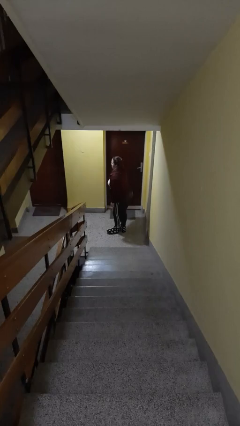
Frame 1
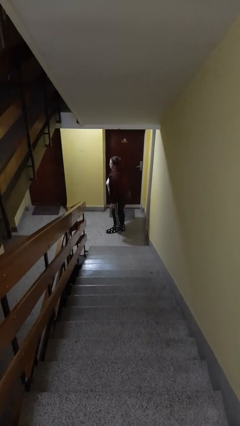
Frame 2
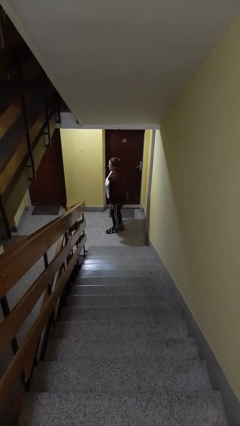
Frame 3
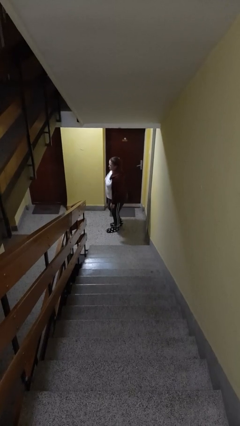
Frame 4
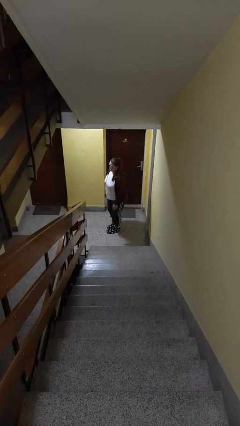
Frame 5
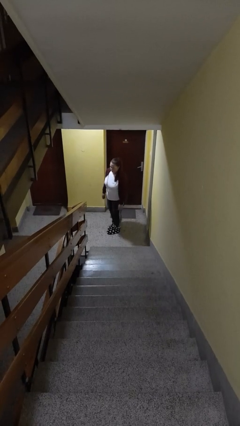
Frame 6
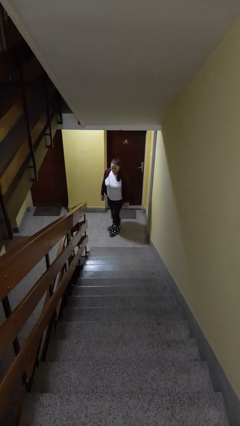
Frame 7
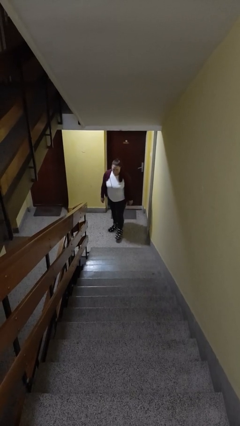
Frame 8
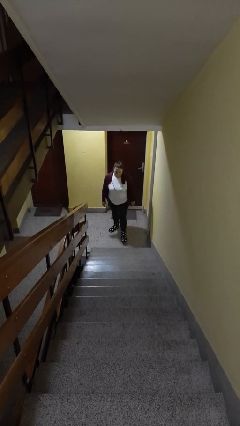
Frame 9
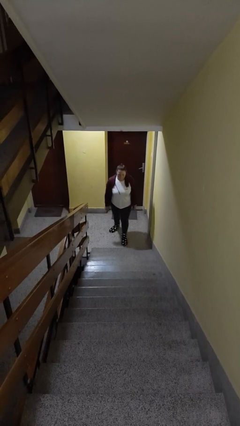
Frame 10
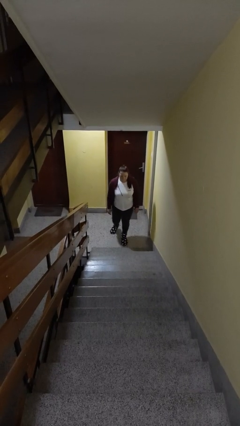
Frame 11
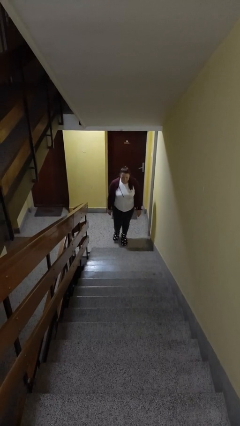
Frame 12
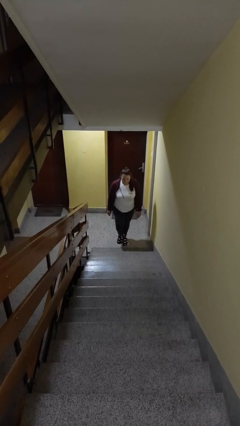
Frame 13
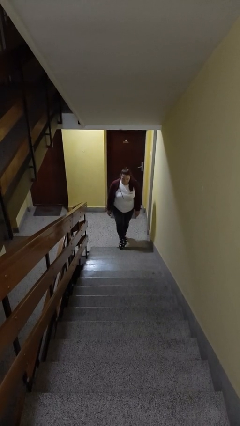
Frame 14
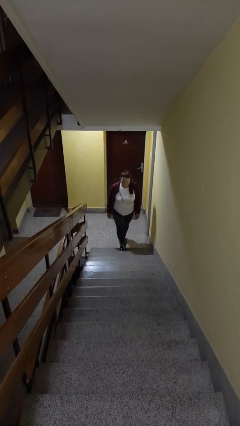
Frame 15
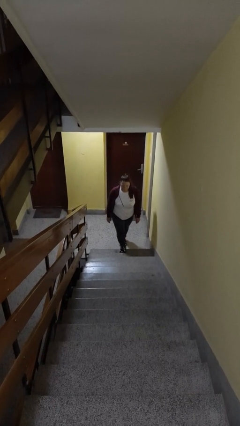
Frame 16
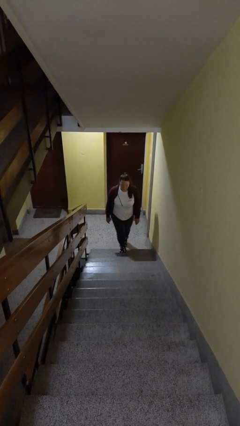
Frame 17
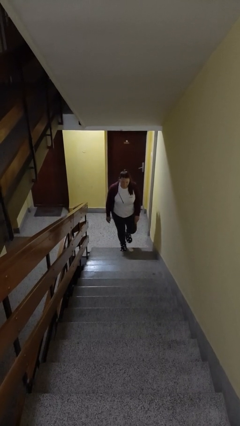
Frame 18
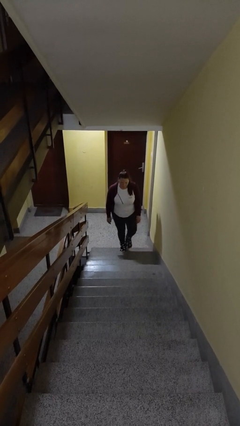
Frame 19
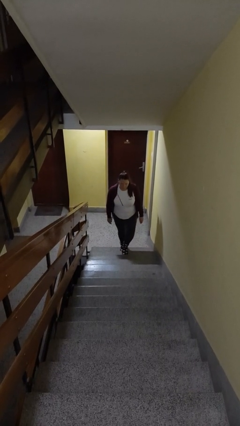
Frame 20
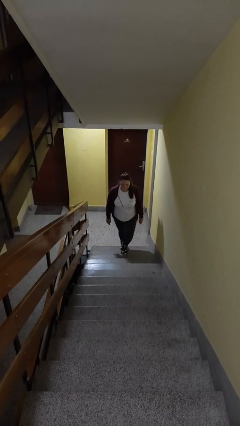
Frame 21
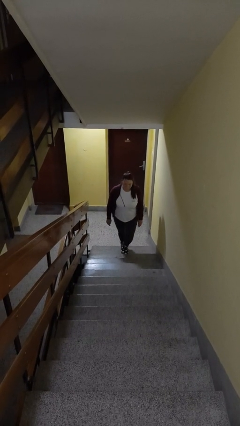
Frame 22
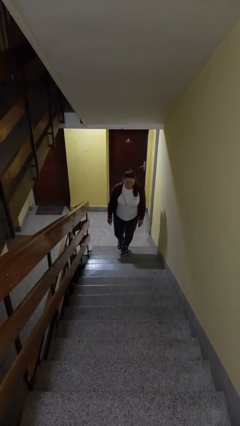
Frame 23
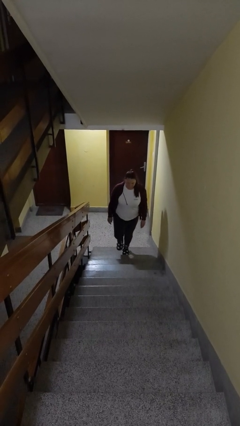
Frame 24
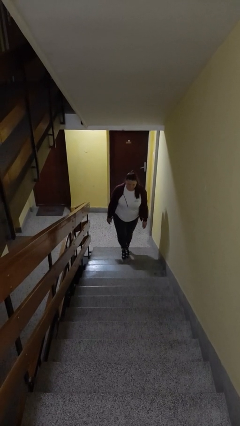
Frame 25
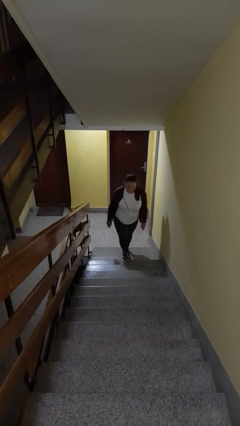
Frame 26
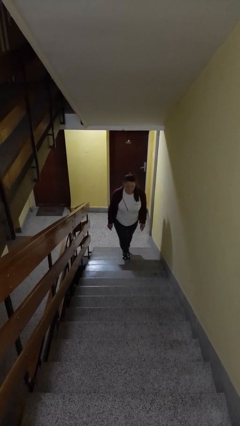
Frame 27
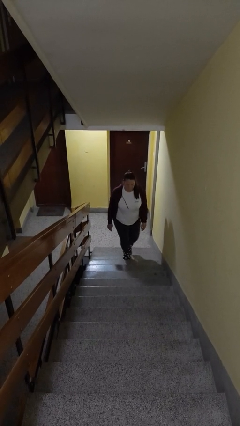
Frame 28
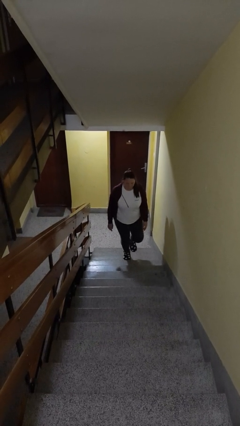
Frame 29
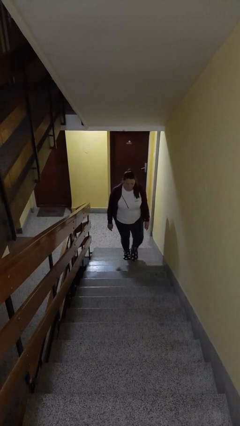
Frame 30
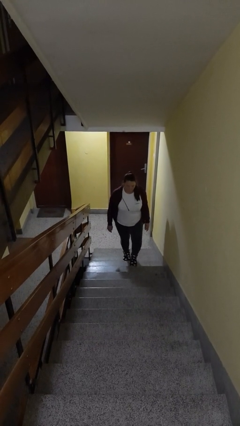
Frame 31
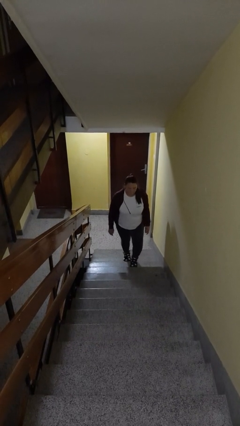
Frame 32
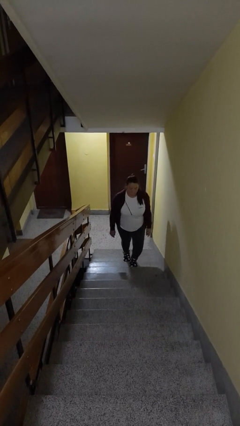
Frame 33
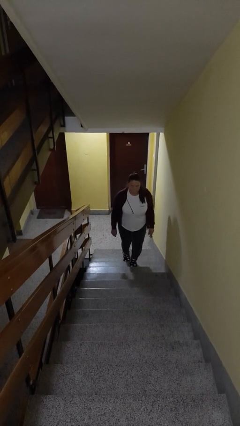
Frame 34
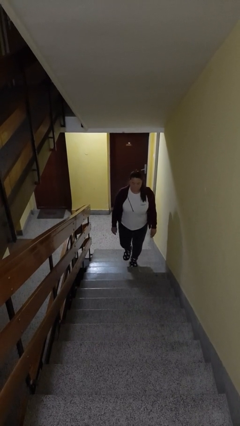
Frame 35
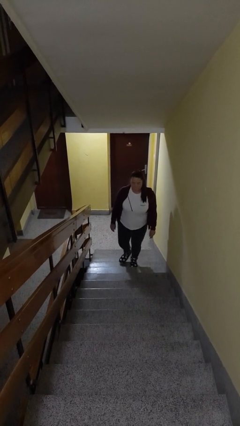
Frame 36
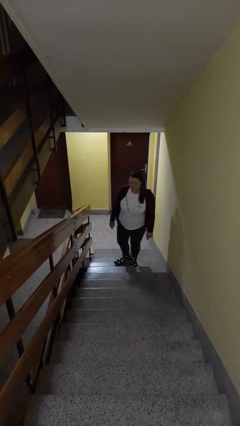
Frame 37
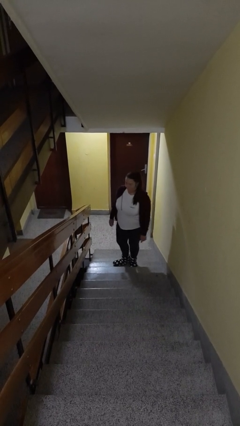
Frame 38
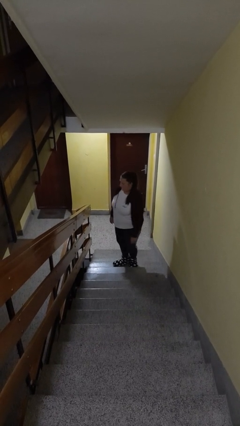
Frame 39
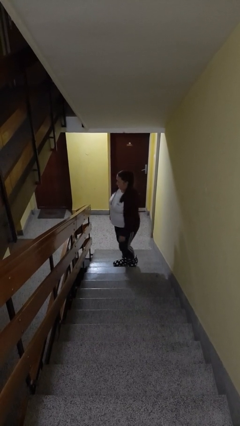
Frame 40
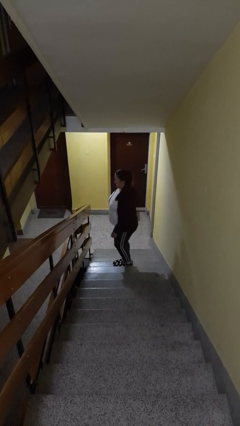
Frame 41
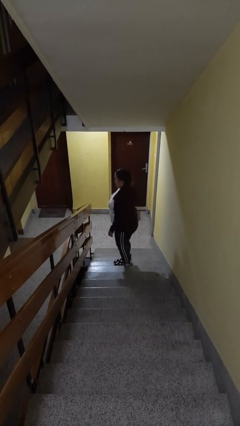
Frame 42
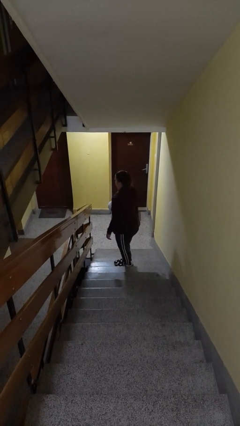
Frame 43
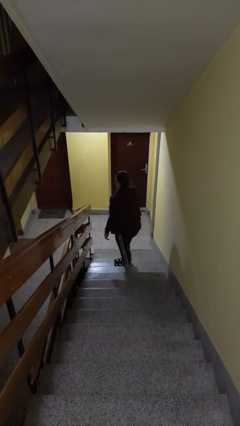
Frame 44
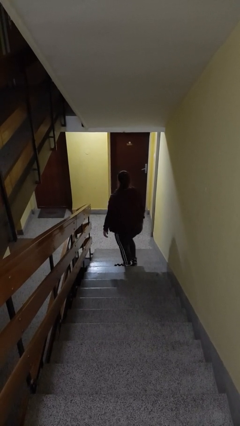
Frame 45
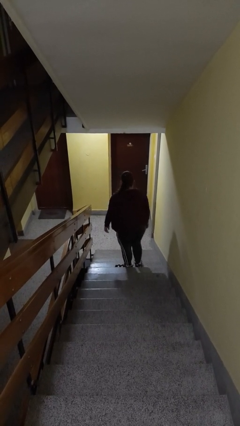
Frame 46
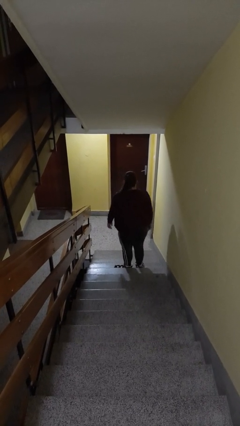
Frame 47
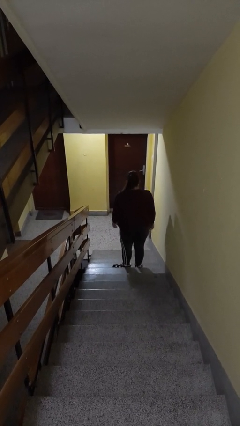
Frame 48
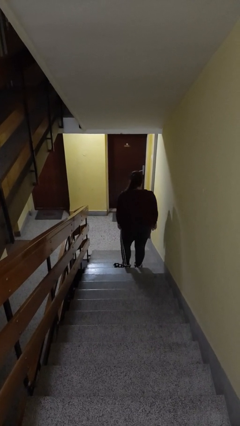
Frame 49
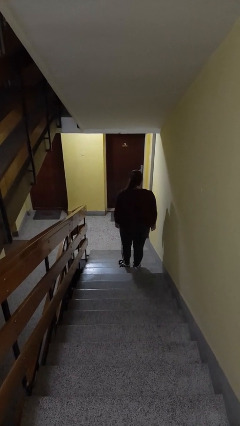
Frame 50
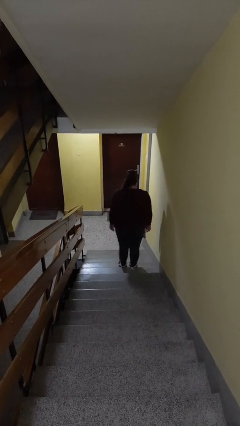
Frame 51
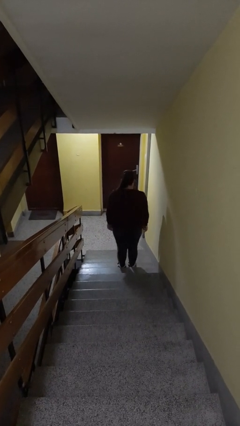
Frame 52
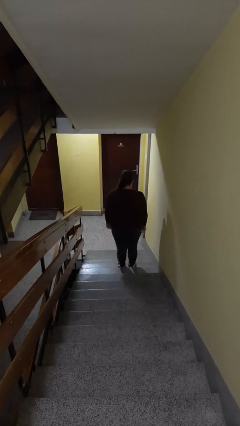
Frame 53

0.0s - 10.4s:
person climbs up stairs

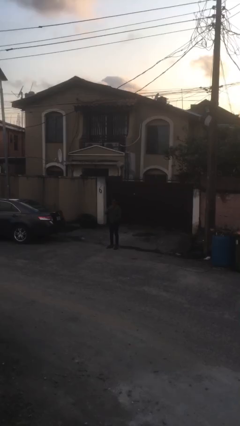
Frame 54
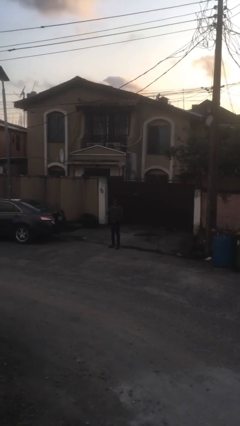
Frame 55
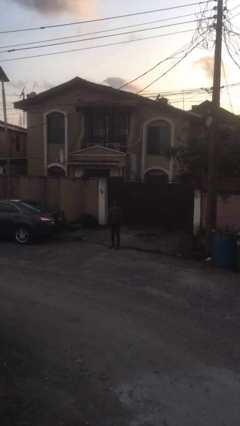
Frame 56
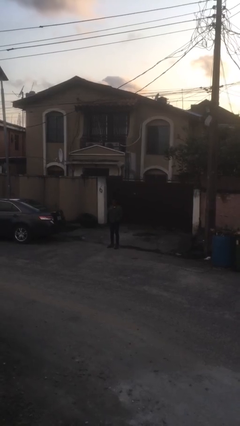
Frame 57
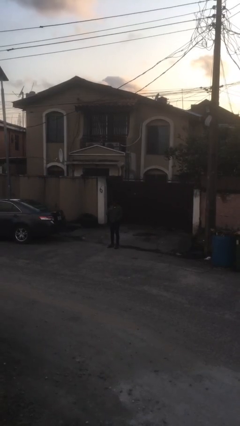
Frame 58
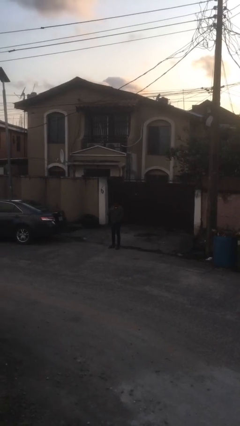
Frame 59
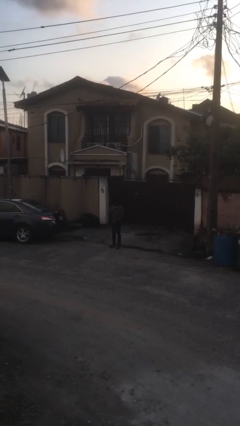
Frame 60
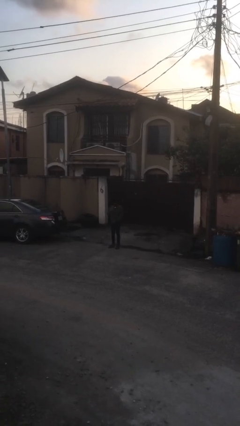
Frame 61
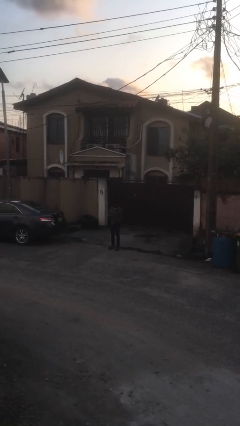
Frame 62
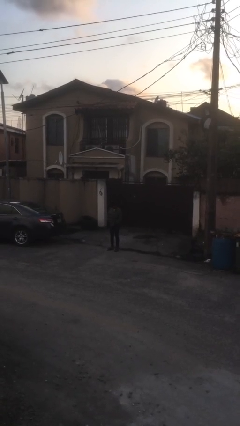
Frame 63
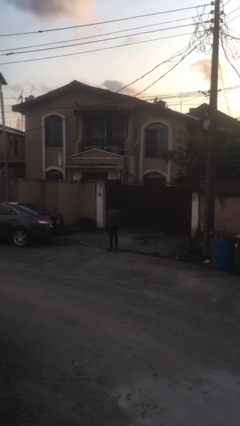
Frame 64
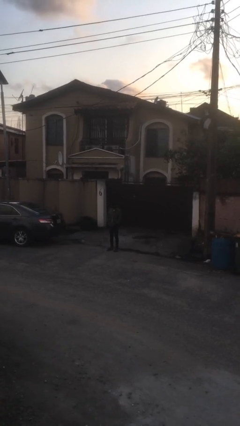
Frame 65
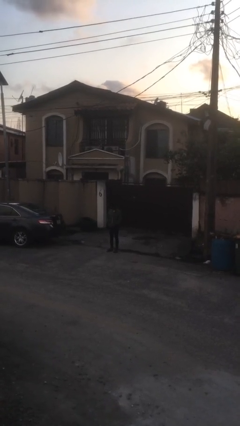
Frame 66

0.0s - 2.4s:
person zips up jacket

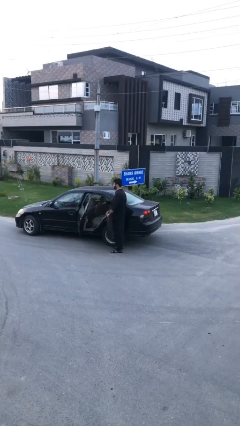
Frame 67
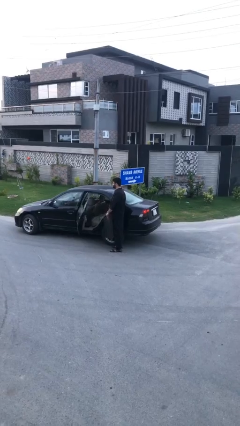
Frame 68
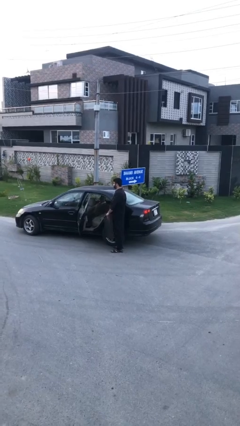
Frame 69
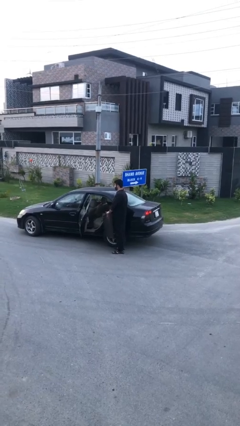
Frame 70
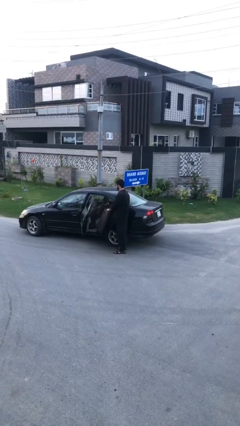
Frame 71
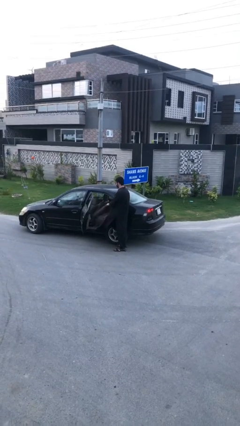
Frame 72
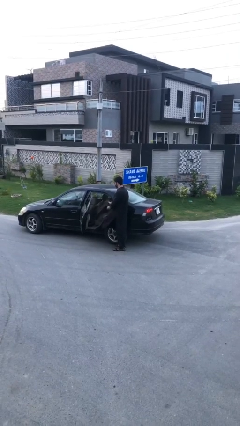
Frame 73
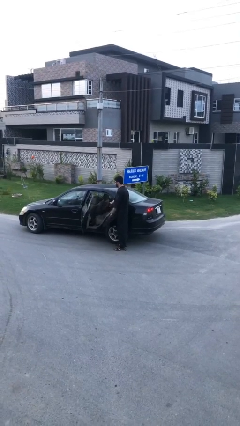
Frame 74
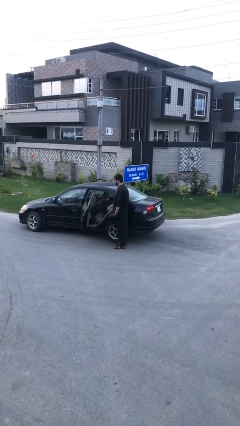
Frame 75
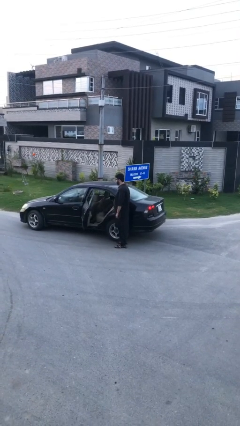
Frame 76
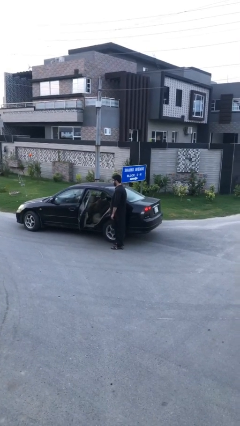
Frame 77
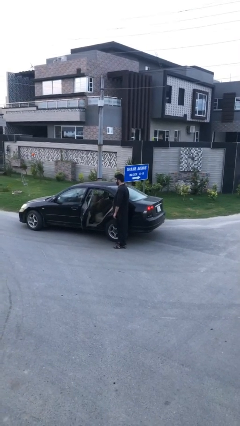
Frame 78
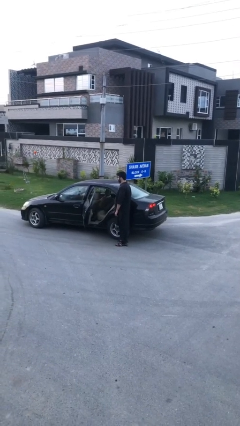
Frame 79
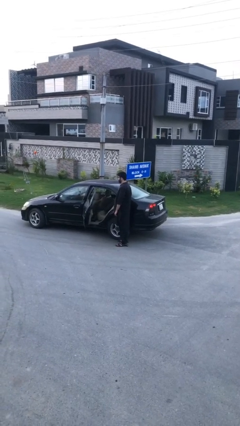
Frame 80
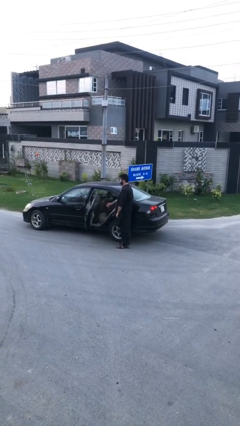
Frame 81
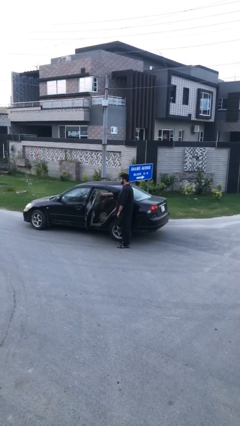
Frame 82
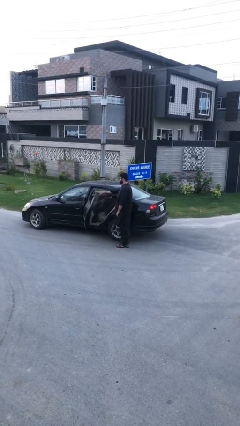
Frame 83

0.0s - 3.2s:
person loads car

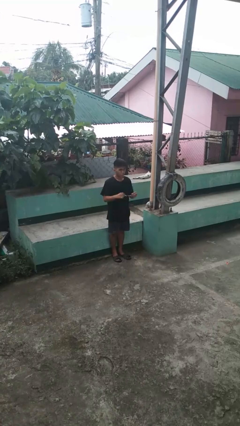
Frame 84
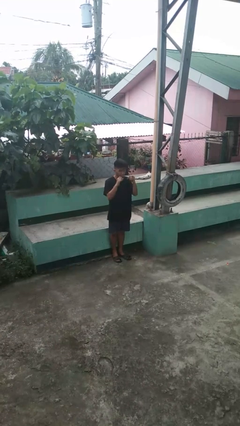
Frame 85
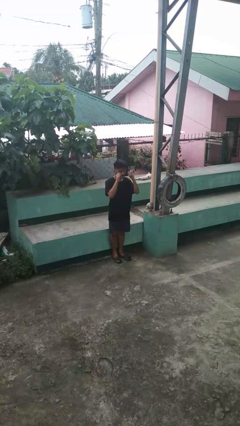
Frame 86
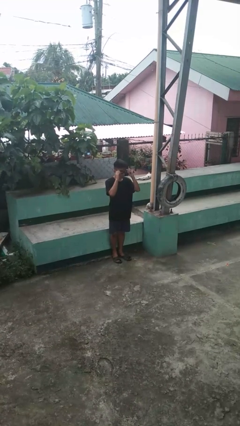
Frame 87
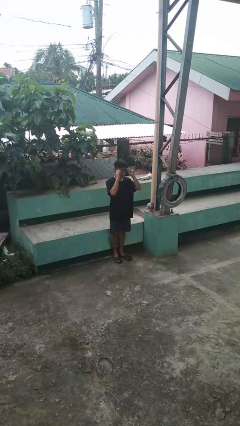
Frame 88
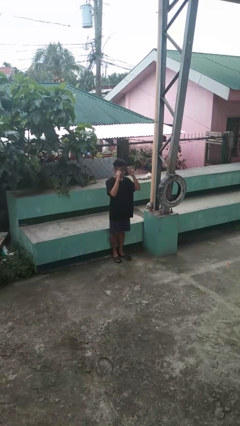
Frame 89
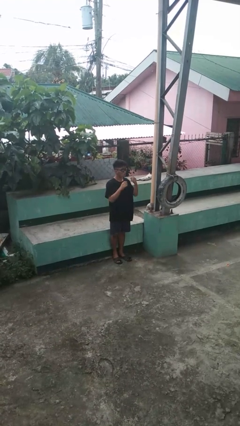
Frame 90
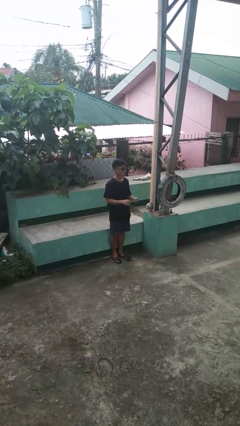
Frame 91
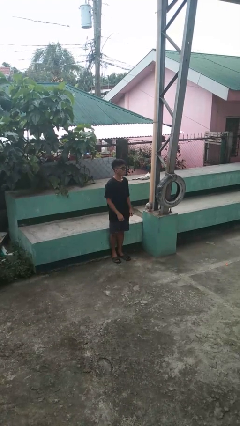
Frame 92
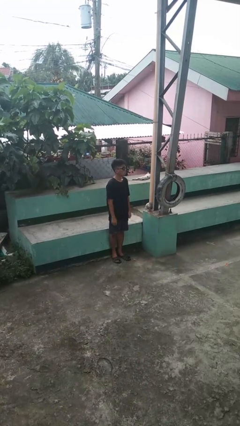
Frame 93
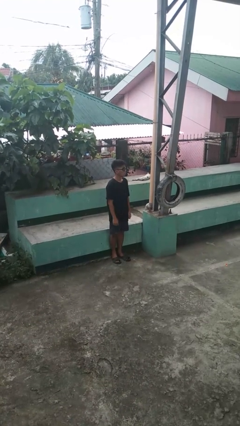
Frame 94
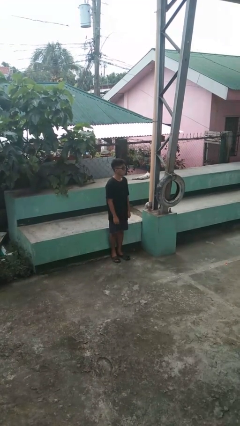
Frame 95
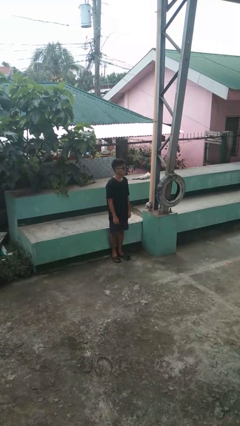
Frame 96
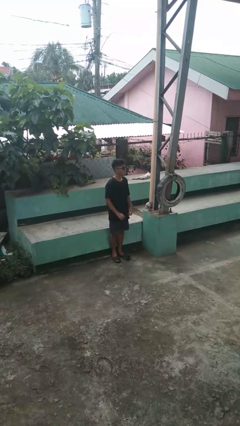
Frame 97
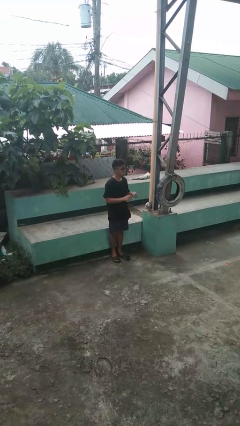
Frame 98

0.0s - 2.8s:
person puts on sunglasses
